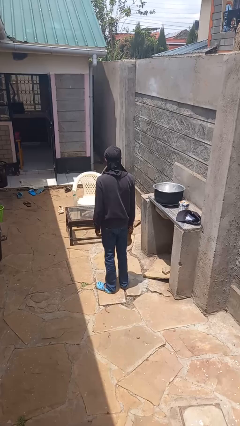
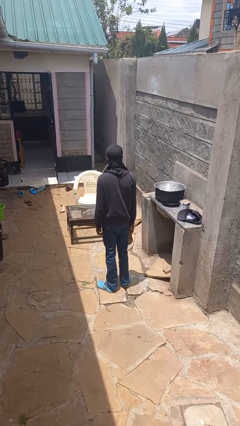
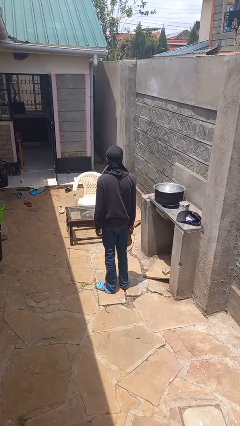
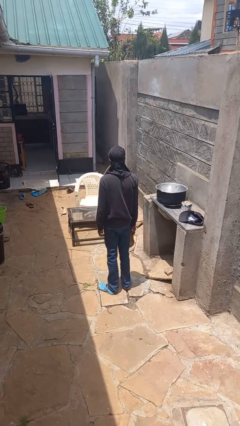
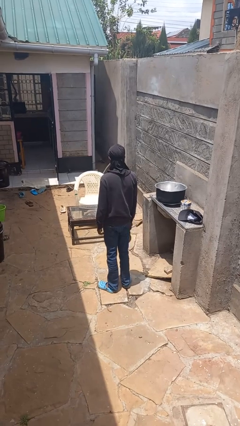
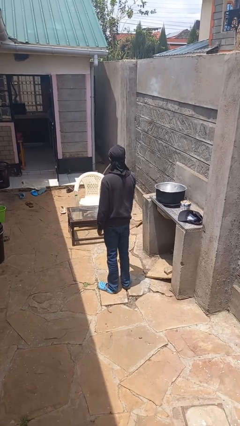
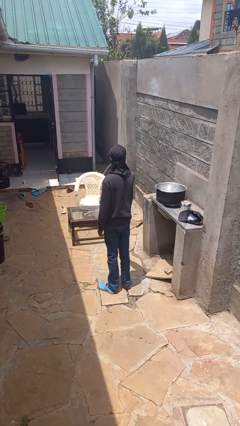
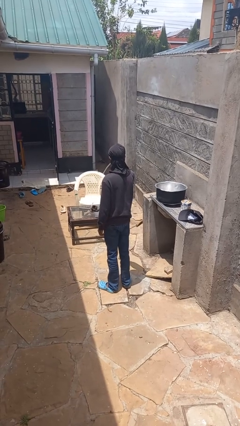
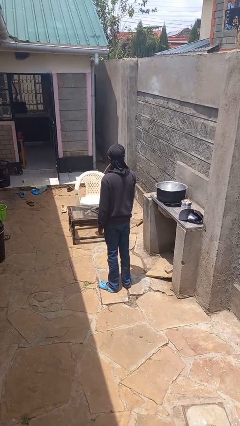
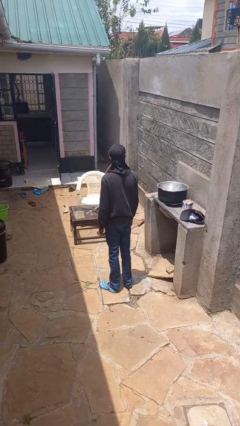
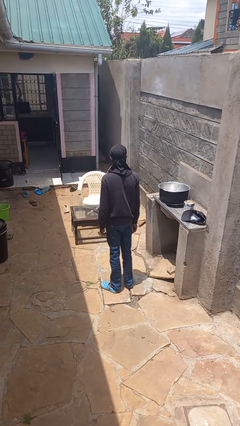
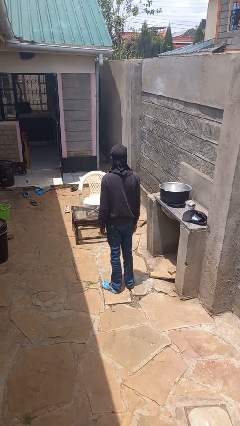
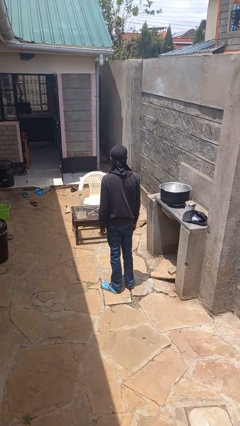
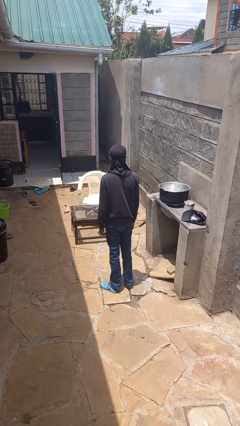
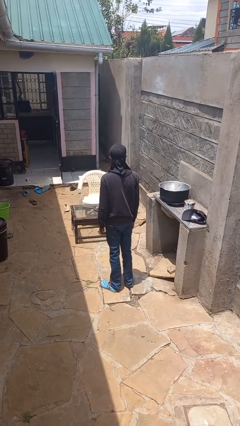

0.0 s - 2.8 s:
person throws object on table

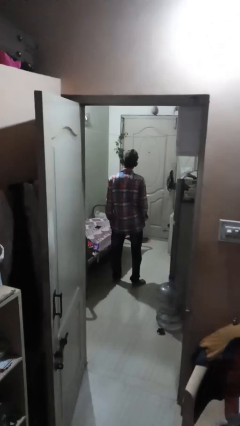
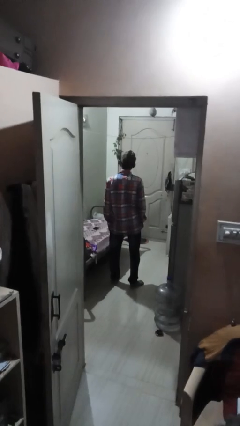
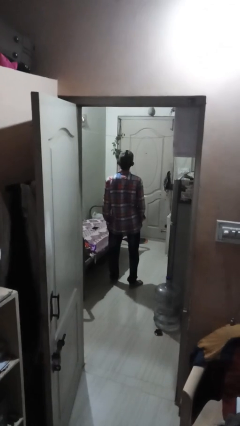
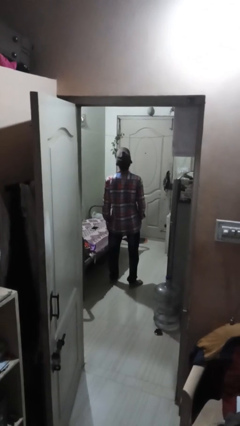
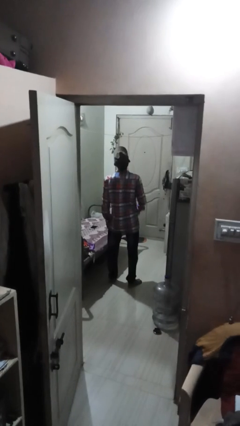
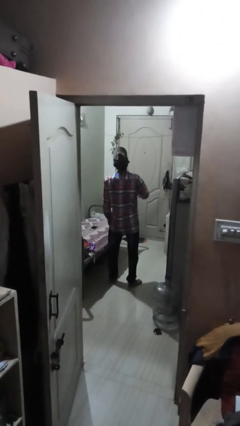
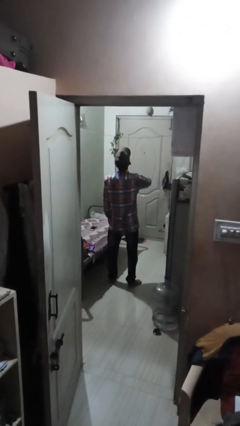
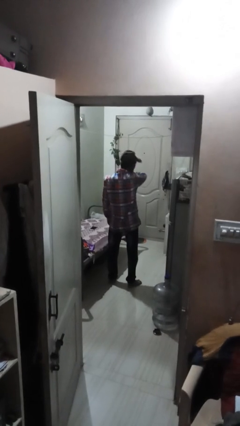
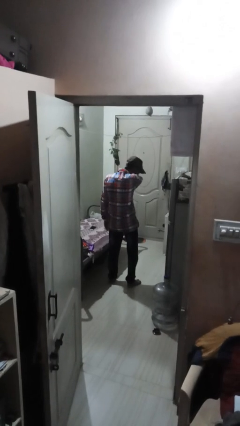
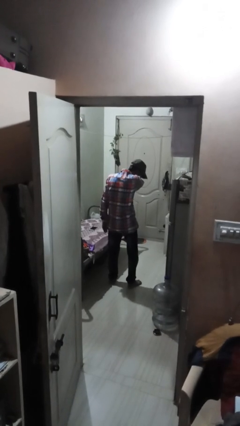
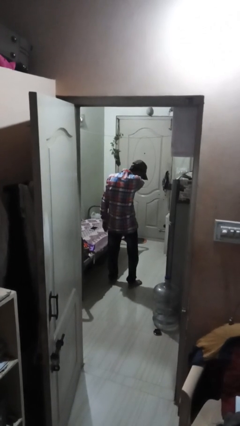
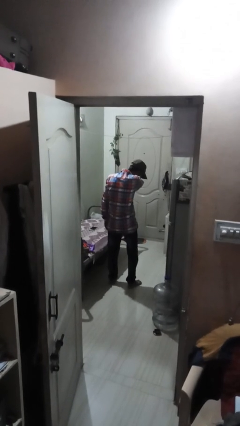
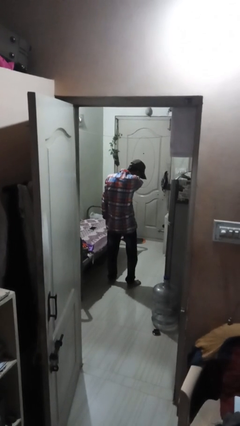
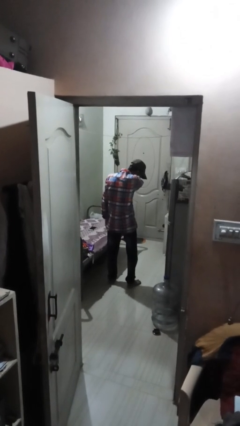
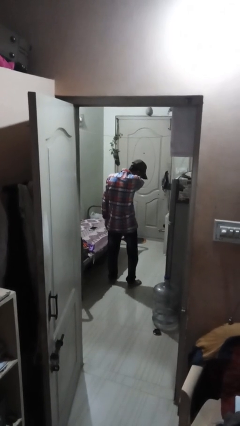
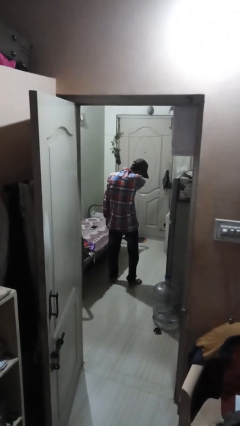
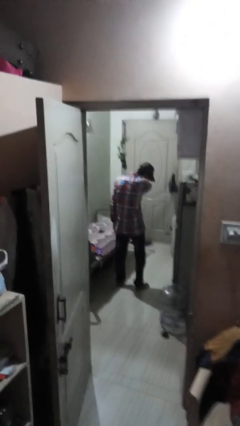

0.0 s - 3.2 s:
person sneezes into arm

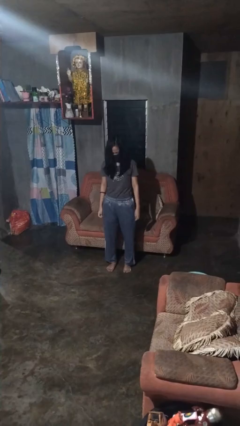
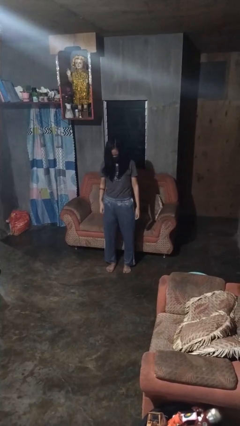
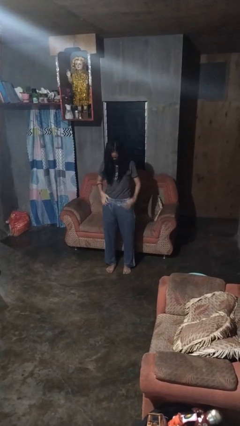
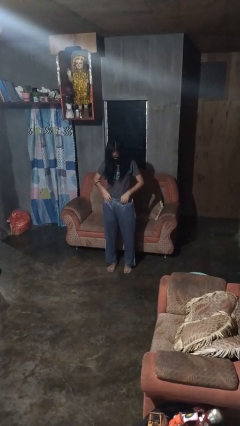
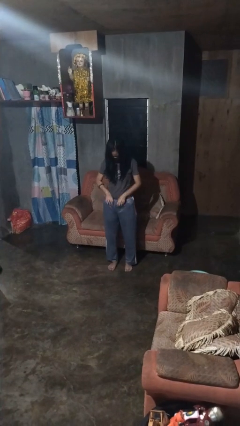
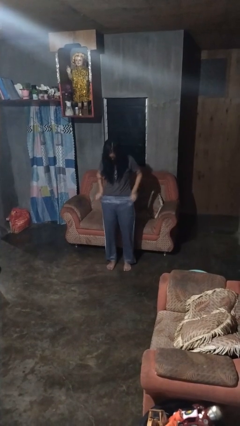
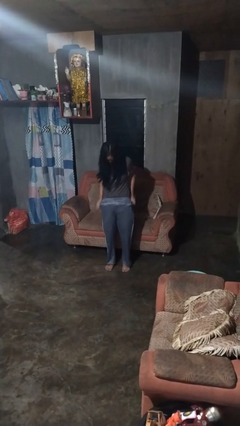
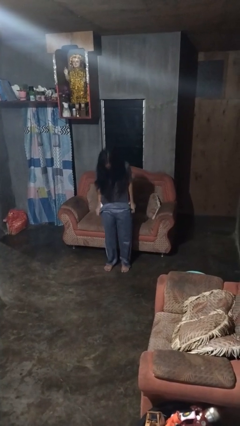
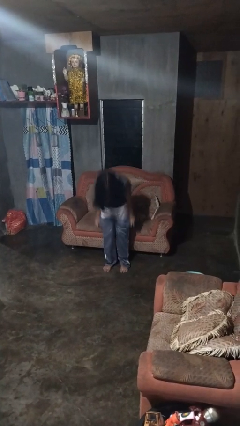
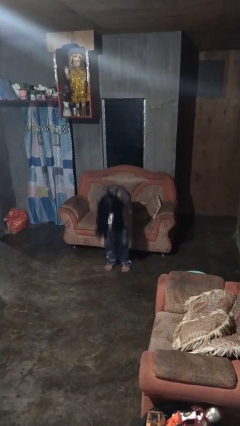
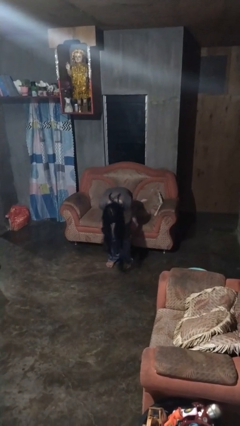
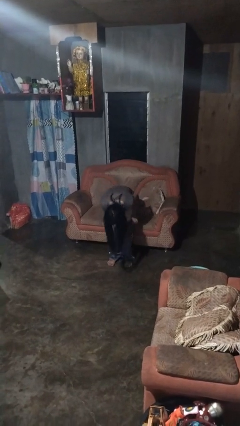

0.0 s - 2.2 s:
person takes off pants

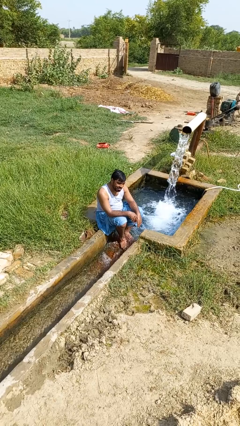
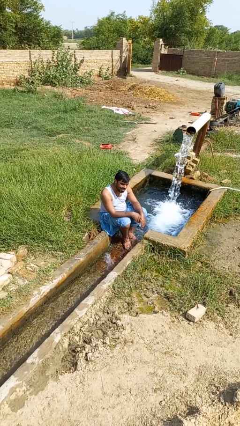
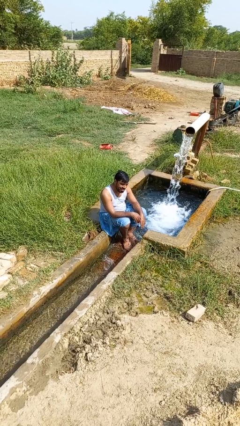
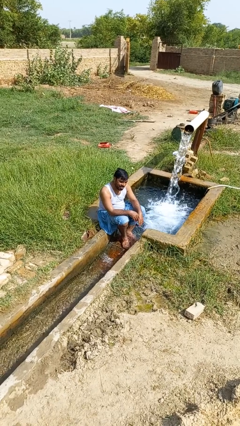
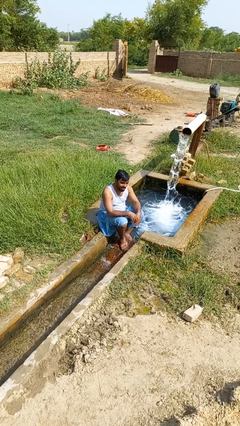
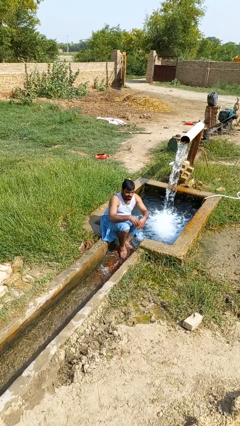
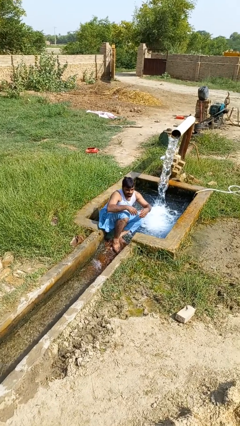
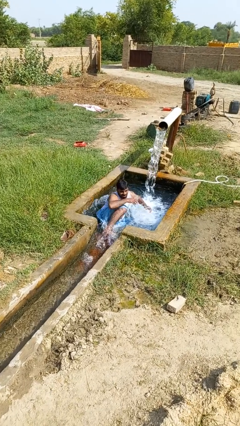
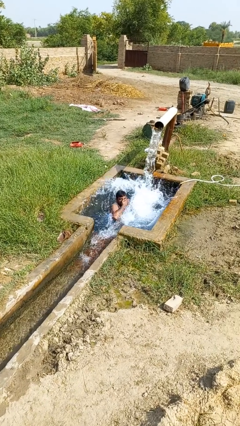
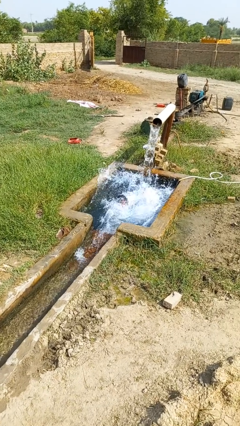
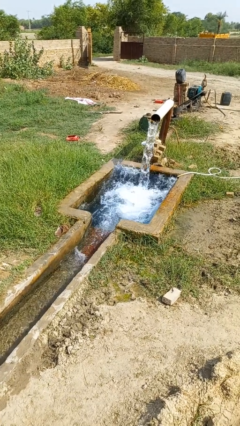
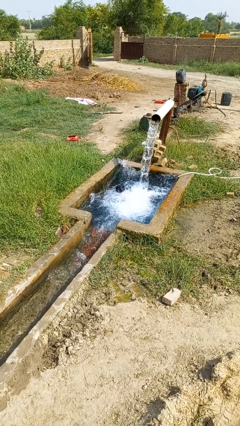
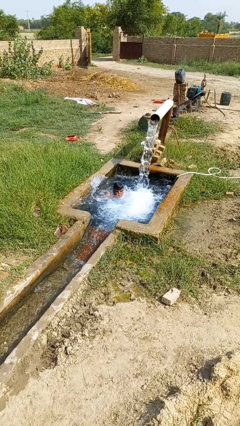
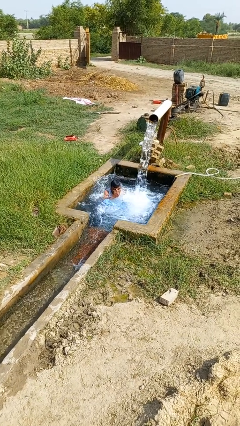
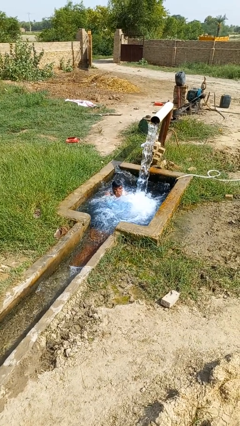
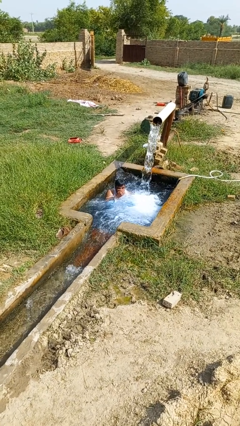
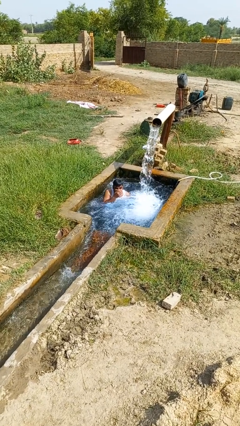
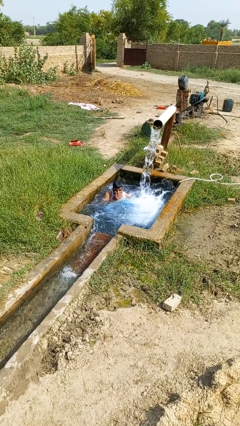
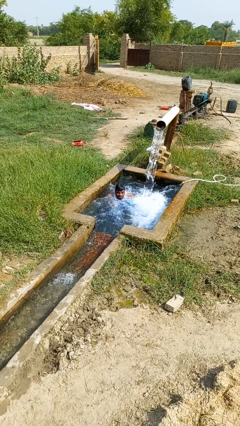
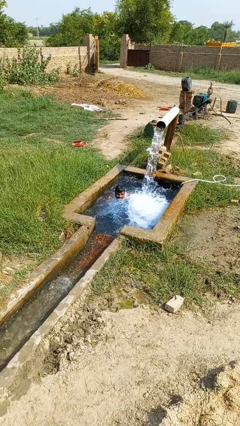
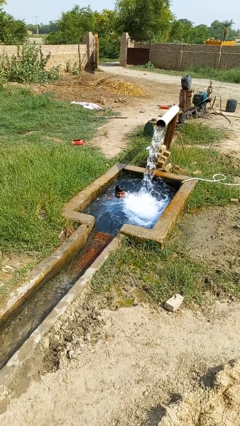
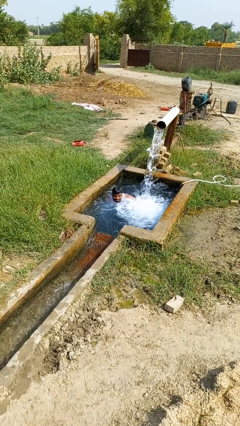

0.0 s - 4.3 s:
person falls into pool

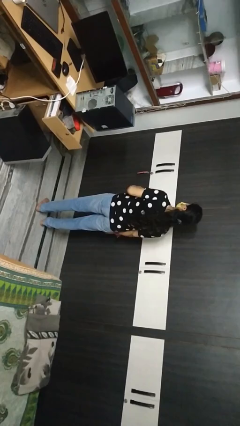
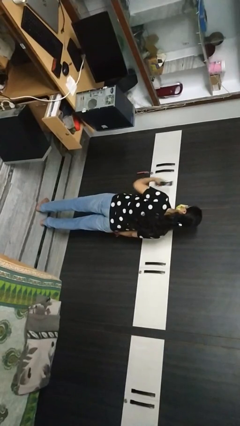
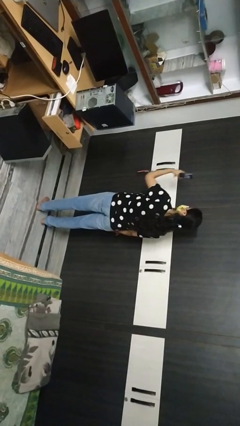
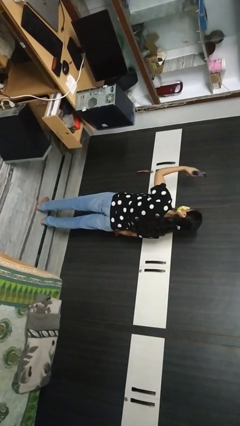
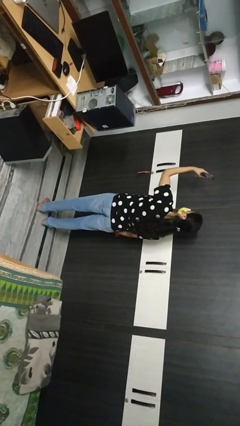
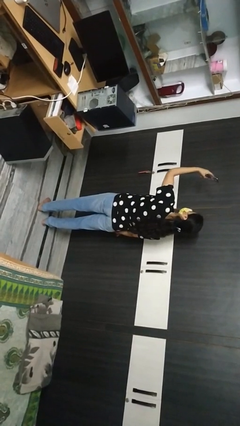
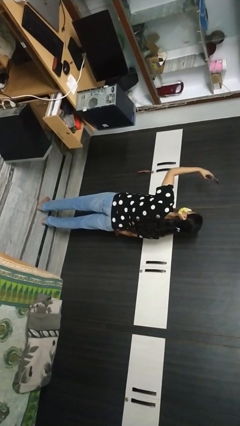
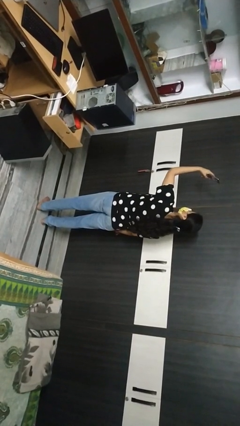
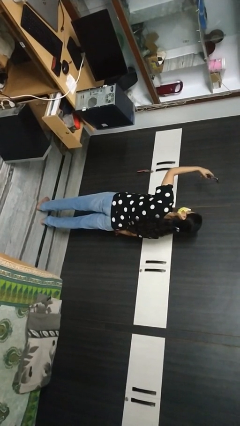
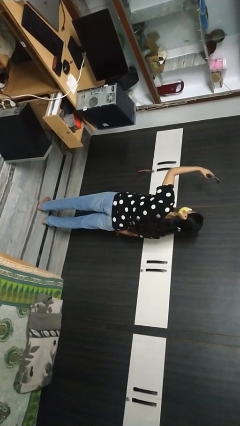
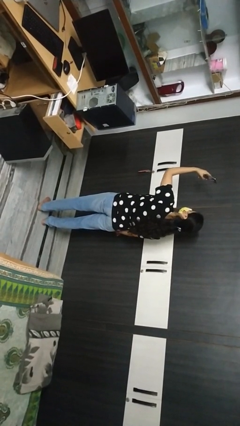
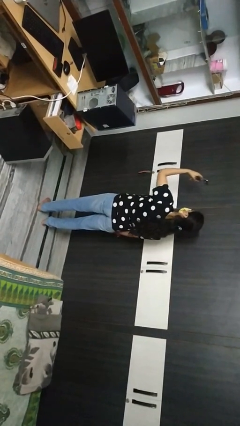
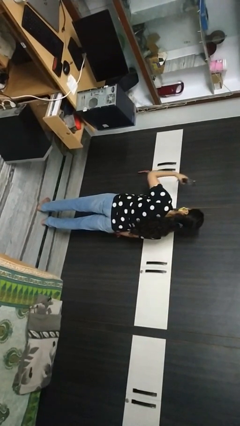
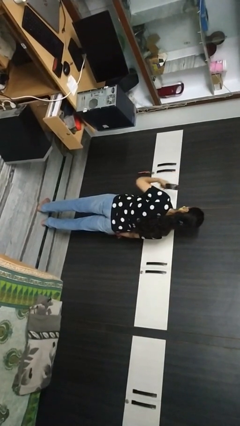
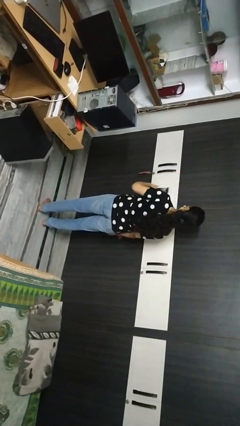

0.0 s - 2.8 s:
person takes selfie

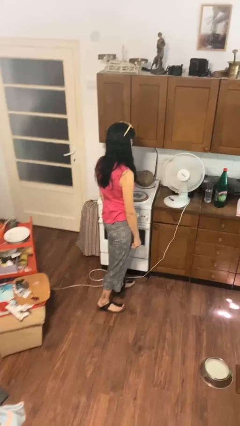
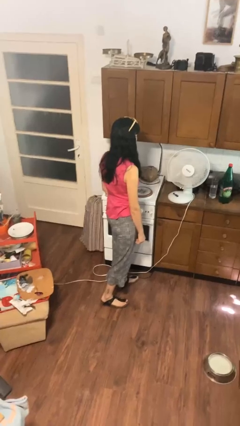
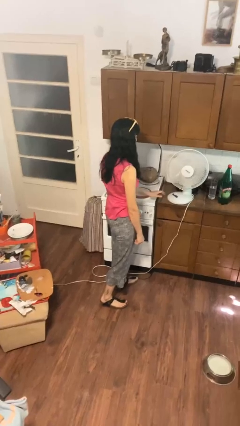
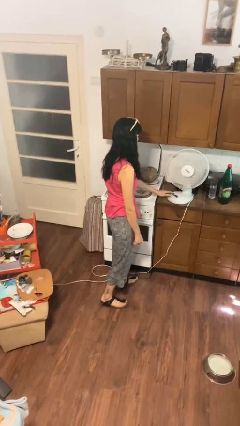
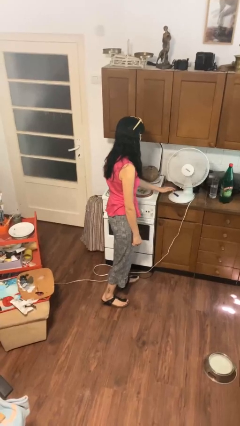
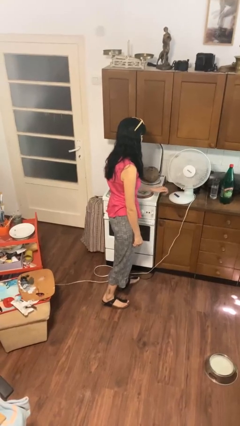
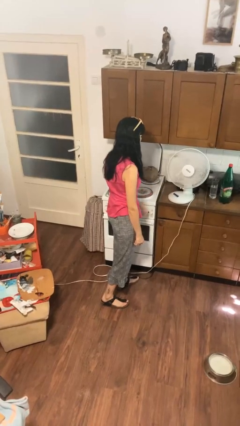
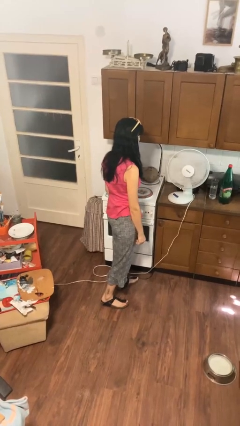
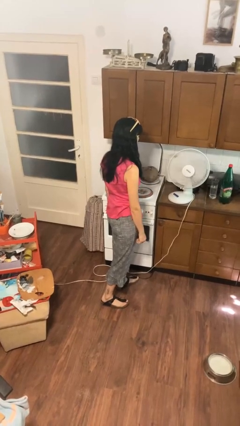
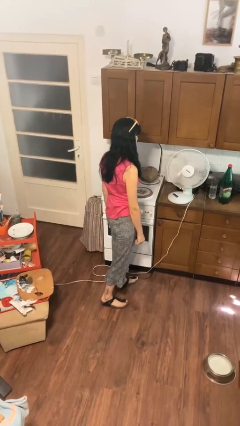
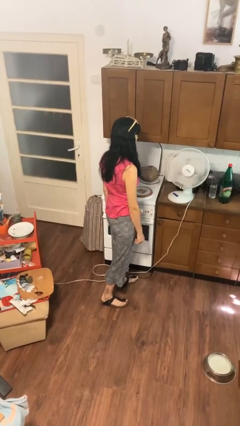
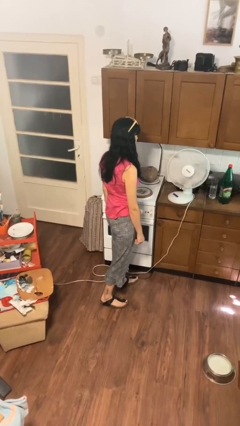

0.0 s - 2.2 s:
person turns off fan
